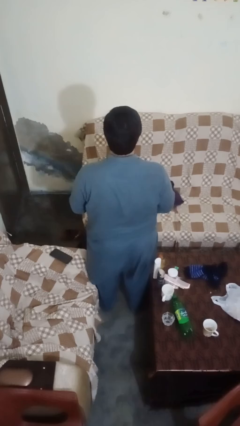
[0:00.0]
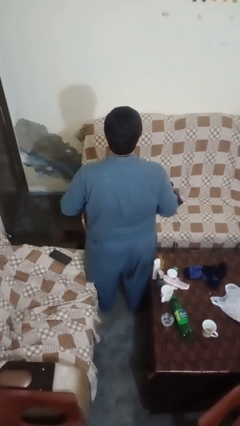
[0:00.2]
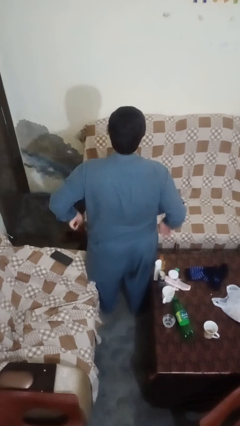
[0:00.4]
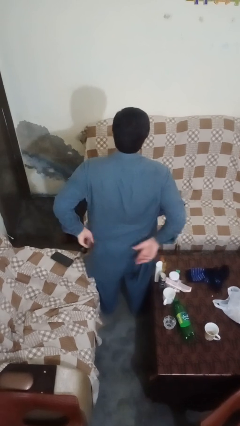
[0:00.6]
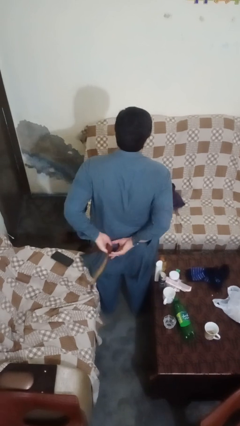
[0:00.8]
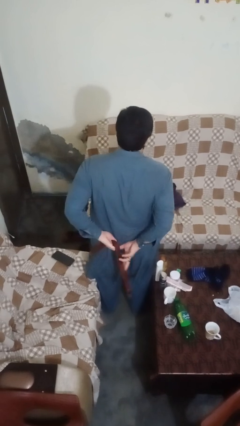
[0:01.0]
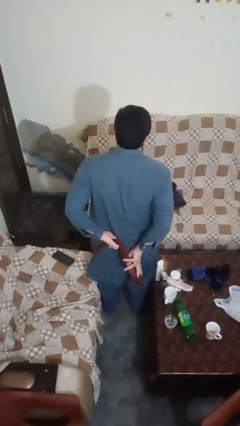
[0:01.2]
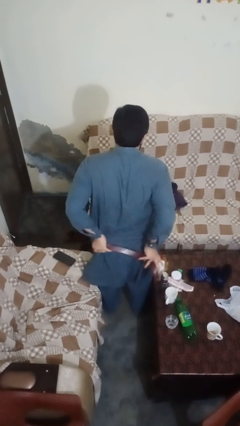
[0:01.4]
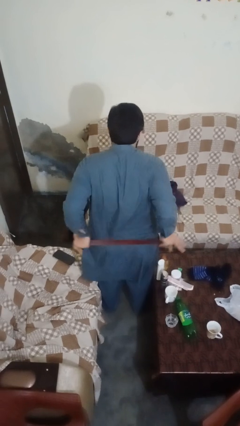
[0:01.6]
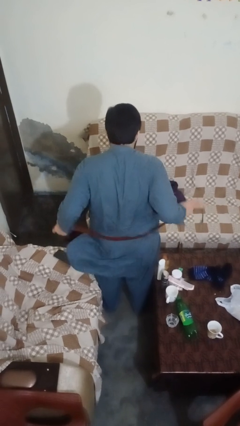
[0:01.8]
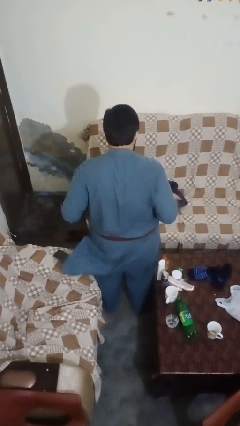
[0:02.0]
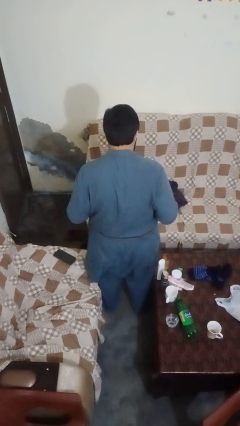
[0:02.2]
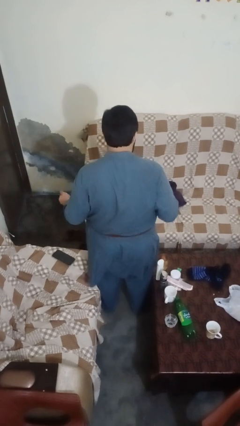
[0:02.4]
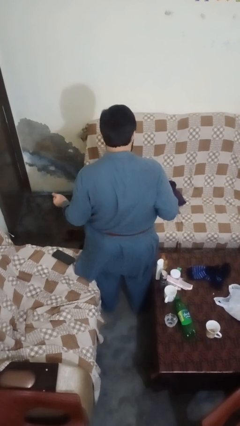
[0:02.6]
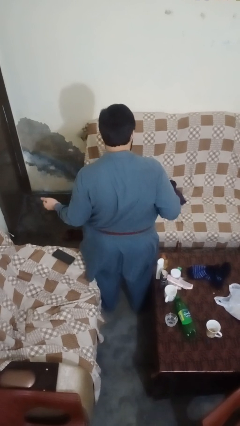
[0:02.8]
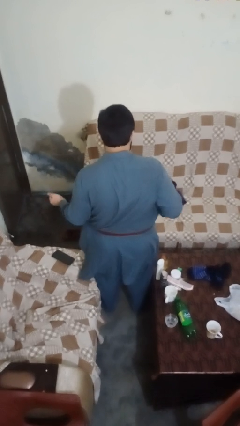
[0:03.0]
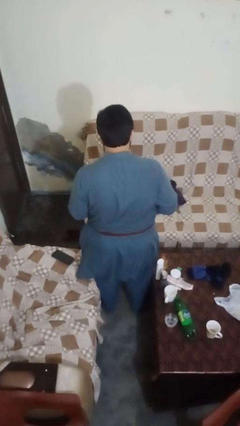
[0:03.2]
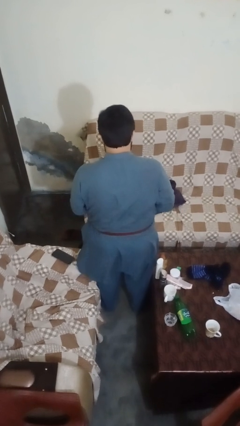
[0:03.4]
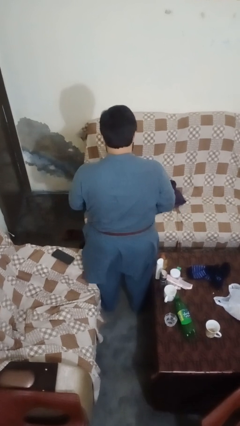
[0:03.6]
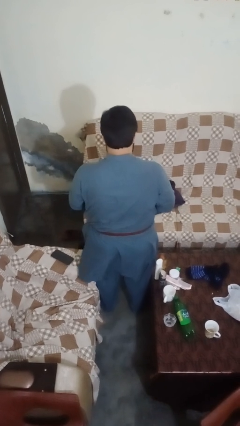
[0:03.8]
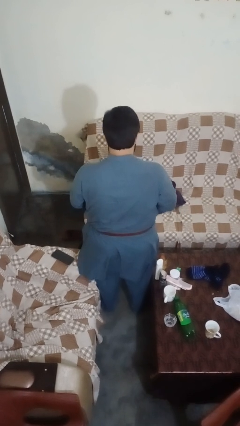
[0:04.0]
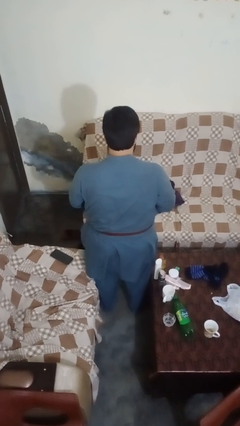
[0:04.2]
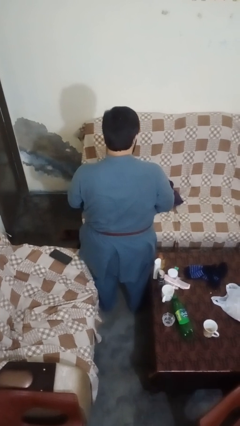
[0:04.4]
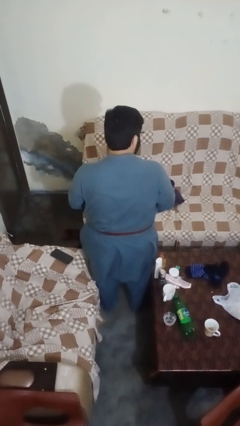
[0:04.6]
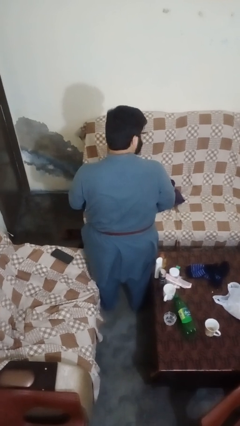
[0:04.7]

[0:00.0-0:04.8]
person puts on belt

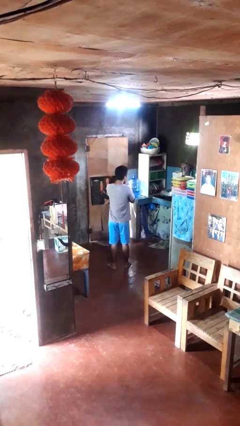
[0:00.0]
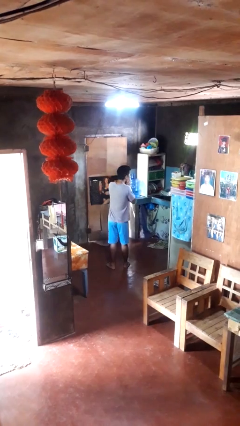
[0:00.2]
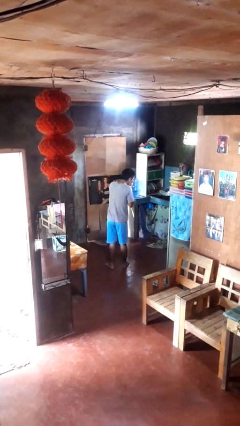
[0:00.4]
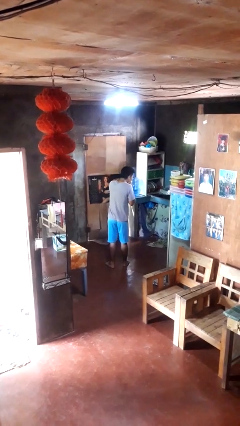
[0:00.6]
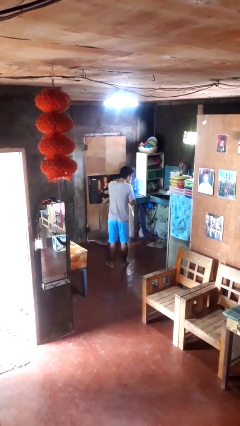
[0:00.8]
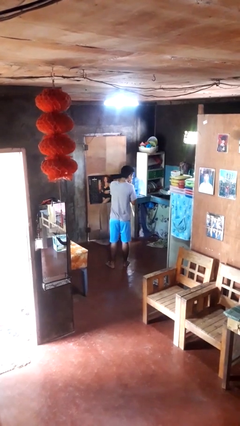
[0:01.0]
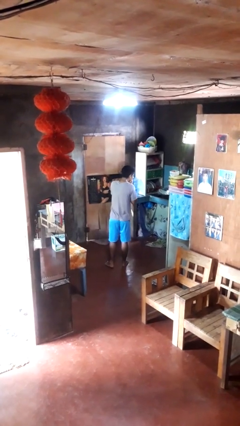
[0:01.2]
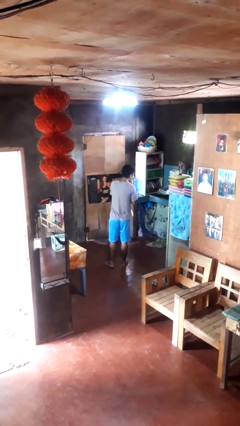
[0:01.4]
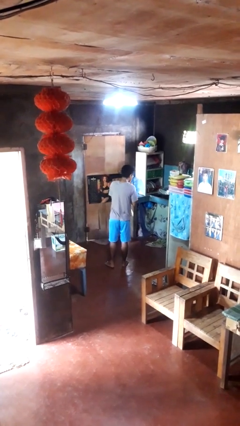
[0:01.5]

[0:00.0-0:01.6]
person sneezes into hand

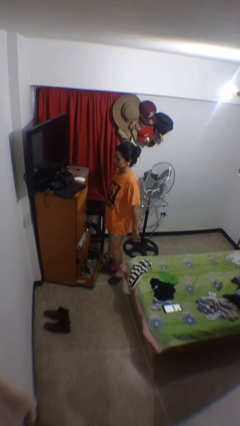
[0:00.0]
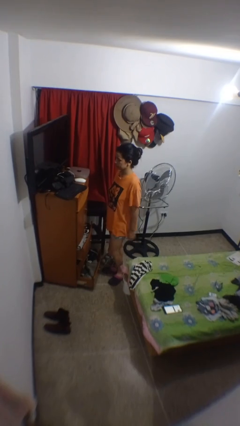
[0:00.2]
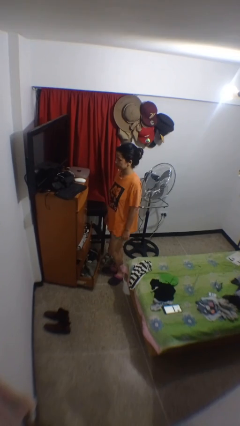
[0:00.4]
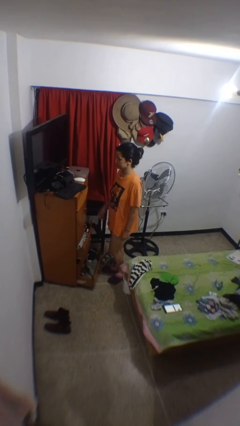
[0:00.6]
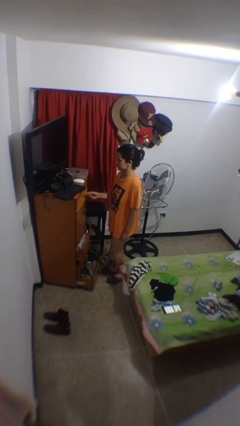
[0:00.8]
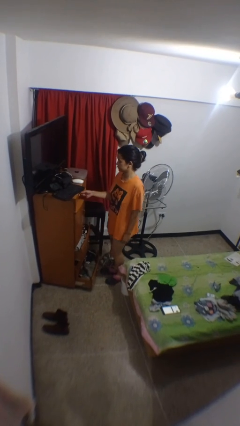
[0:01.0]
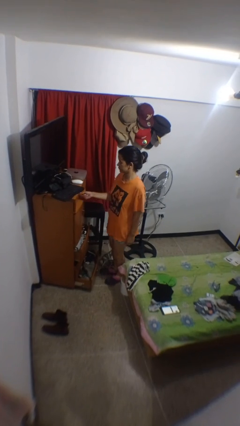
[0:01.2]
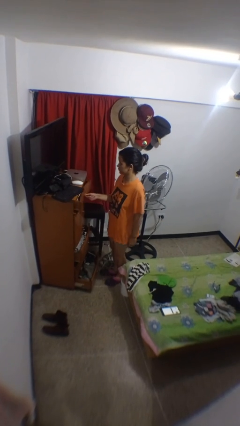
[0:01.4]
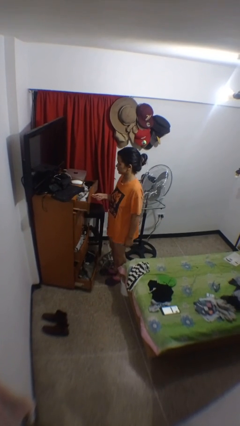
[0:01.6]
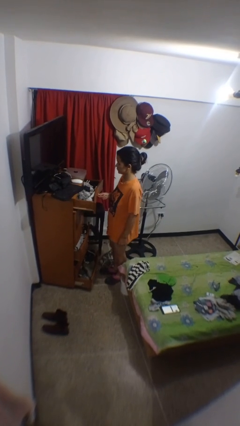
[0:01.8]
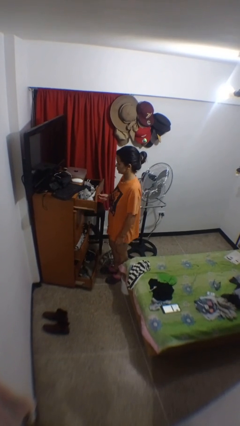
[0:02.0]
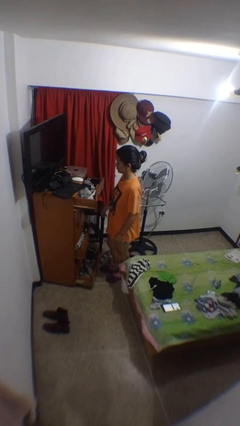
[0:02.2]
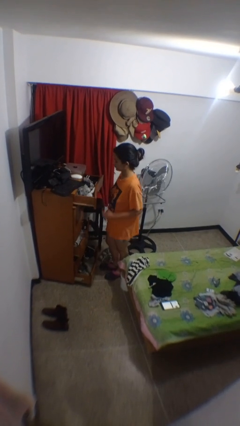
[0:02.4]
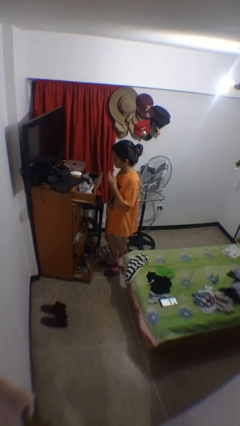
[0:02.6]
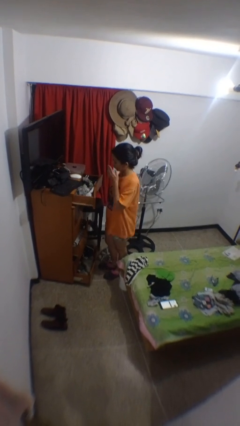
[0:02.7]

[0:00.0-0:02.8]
person opens dresser drawer

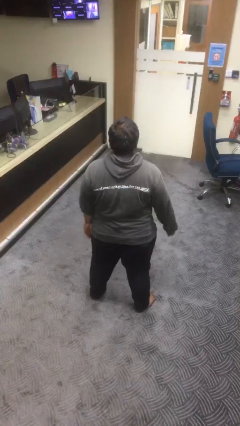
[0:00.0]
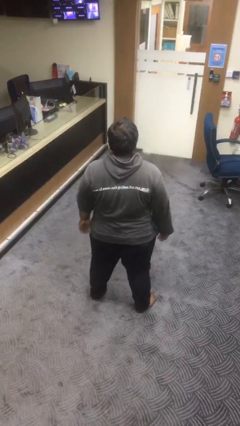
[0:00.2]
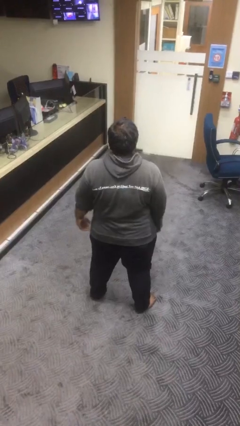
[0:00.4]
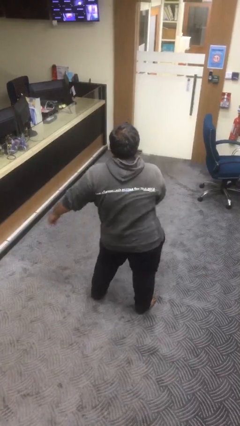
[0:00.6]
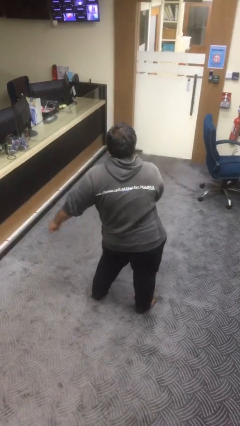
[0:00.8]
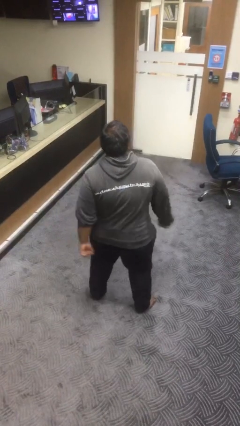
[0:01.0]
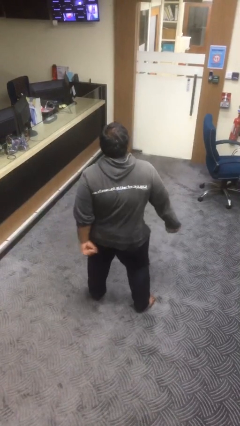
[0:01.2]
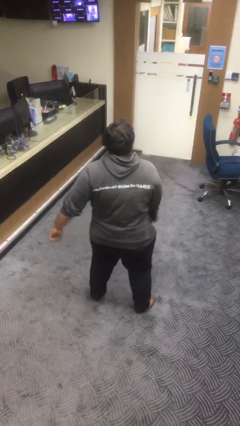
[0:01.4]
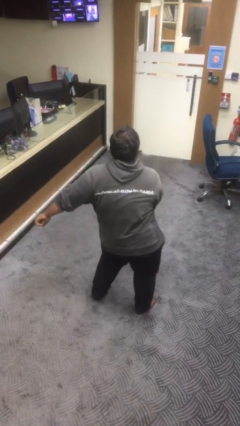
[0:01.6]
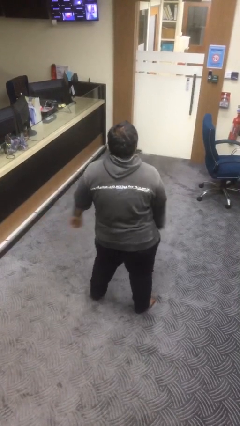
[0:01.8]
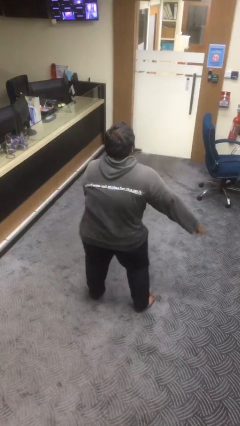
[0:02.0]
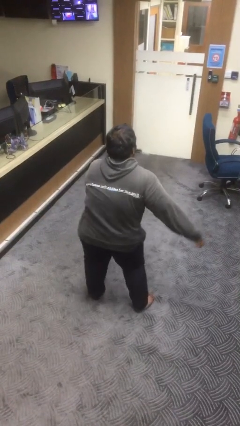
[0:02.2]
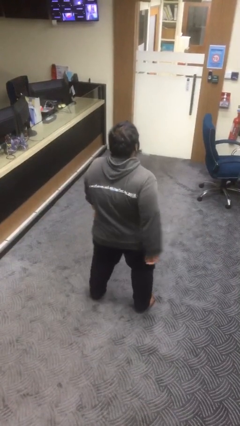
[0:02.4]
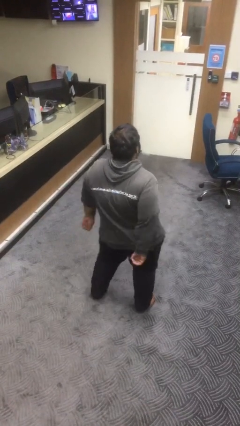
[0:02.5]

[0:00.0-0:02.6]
person dances in place

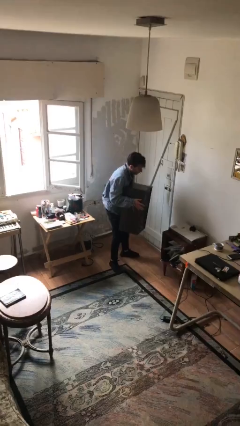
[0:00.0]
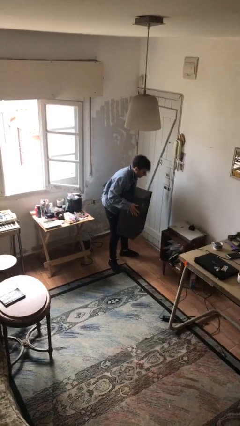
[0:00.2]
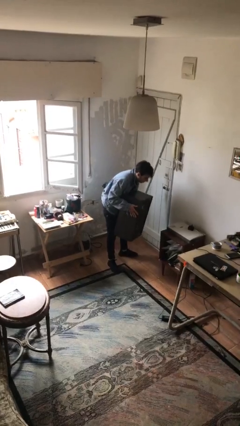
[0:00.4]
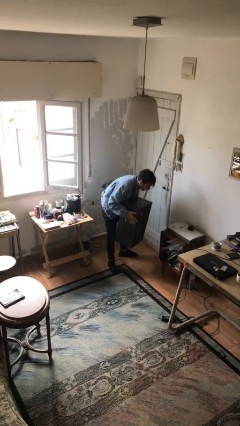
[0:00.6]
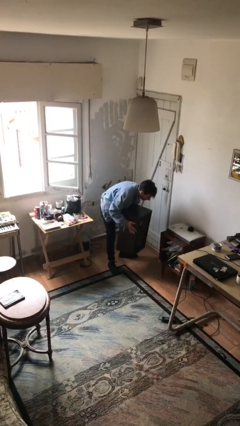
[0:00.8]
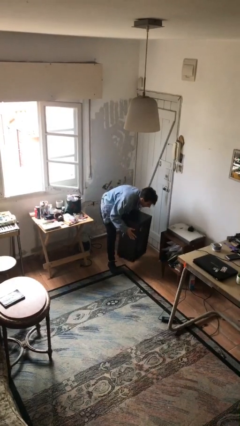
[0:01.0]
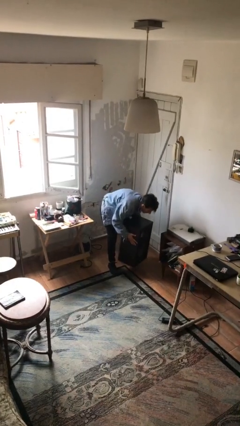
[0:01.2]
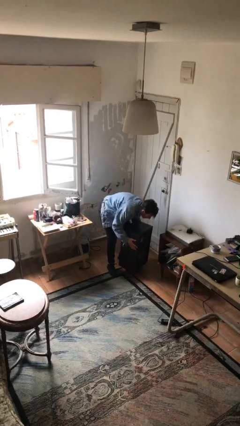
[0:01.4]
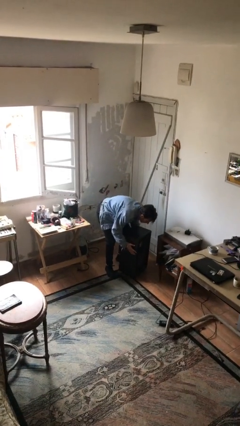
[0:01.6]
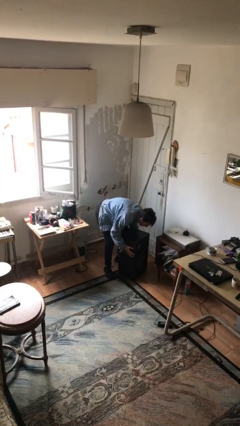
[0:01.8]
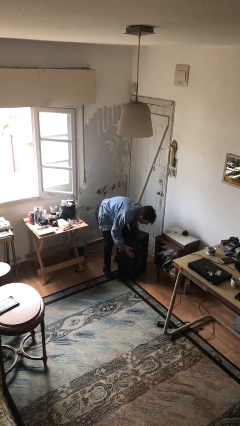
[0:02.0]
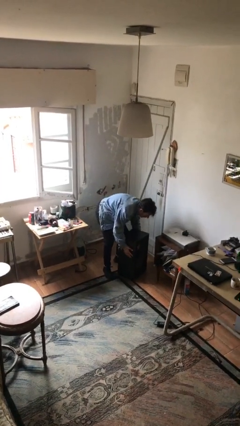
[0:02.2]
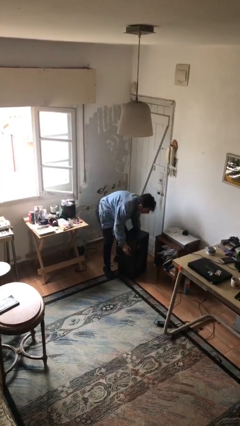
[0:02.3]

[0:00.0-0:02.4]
person puts down object on floor

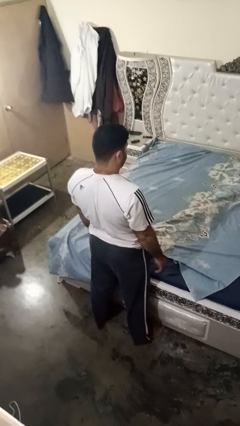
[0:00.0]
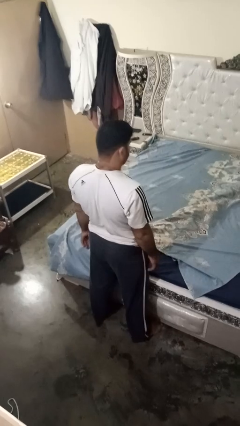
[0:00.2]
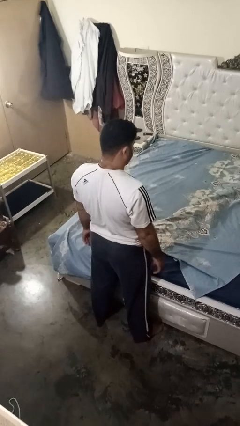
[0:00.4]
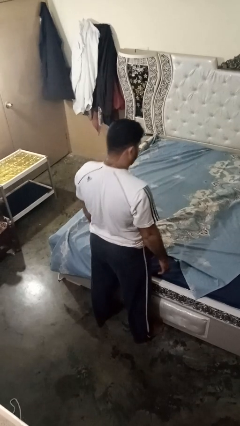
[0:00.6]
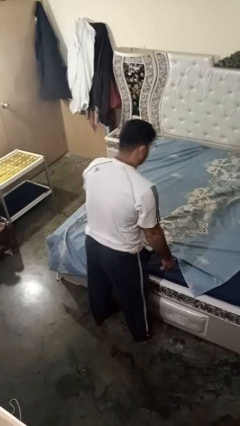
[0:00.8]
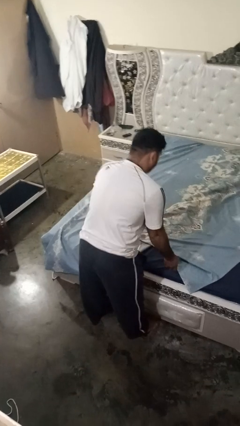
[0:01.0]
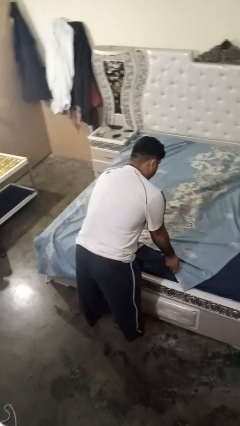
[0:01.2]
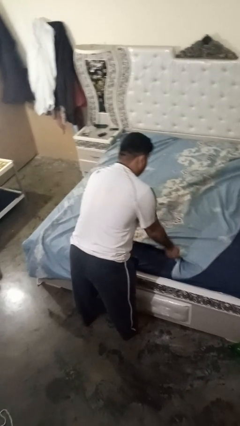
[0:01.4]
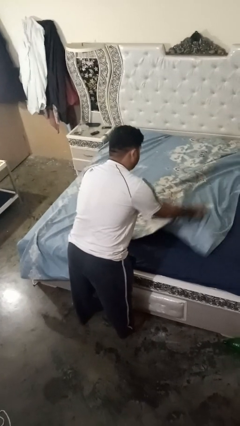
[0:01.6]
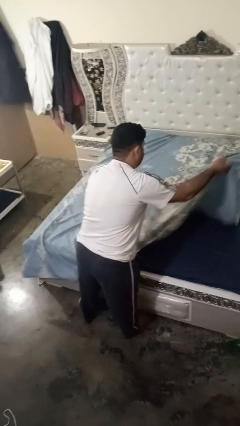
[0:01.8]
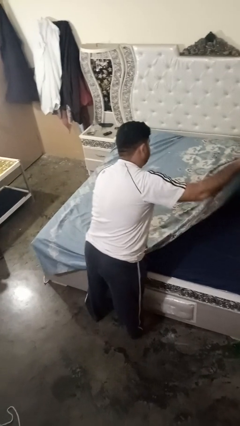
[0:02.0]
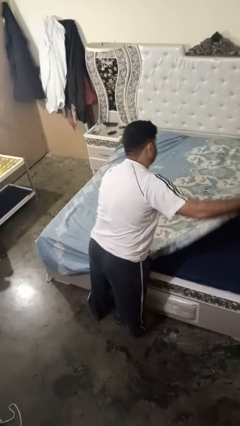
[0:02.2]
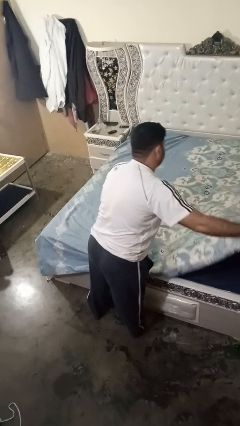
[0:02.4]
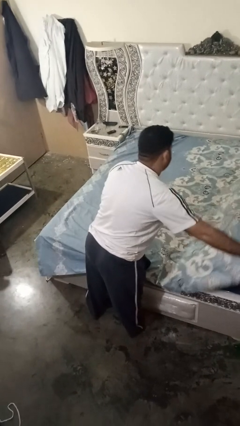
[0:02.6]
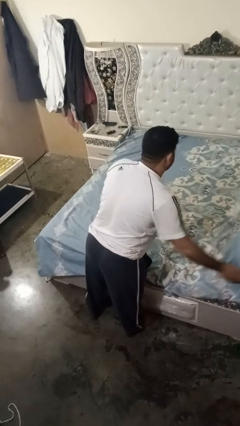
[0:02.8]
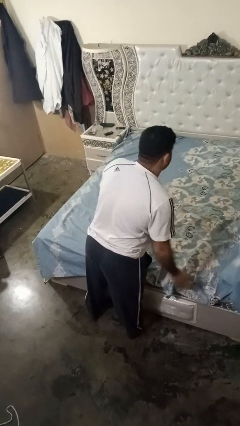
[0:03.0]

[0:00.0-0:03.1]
person makes bed

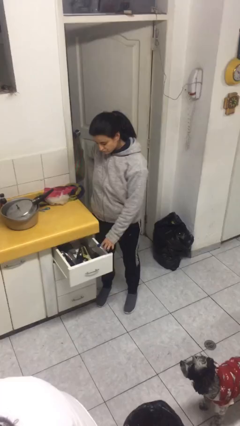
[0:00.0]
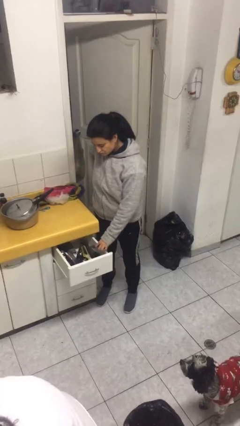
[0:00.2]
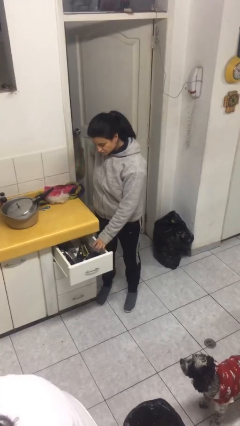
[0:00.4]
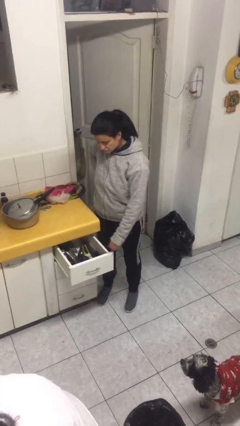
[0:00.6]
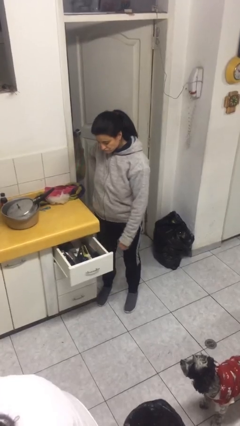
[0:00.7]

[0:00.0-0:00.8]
person puts object into kitchen drawer
